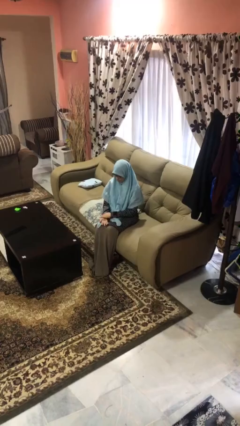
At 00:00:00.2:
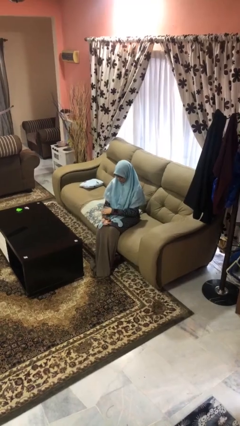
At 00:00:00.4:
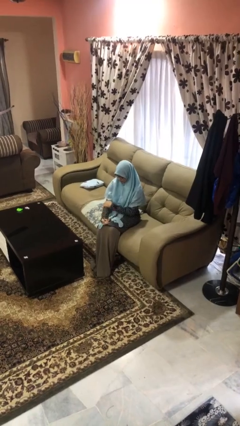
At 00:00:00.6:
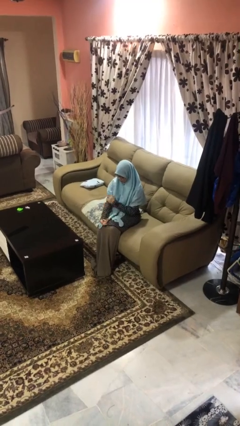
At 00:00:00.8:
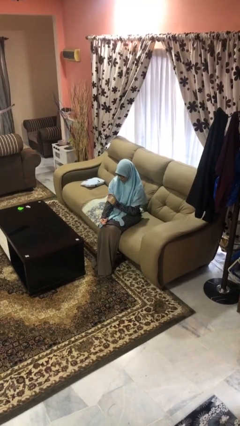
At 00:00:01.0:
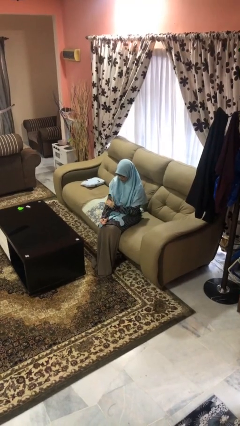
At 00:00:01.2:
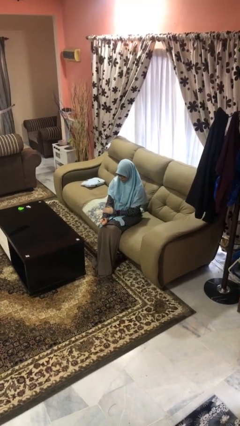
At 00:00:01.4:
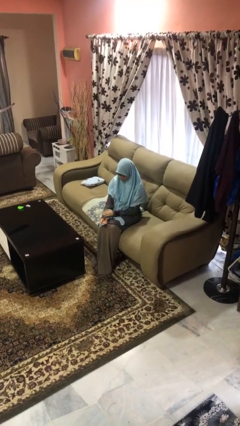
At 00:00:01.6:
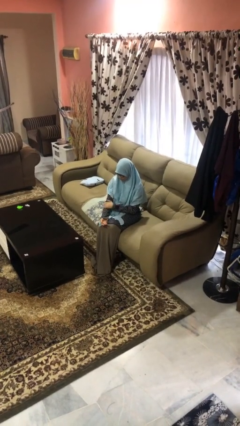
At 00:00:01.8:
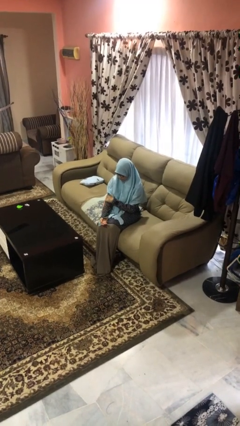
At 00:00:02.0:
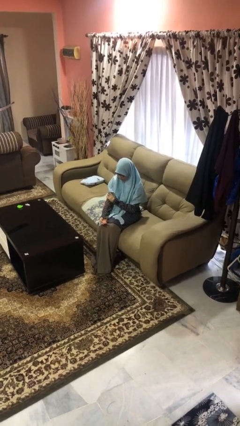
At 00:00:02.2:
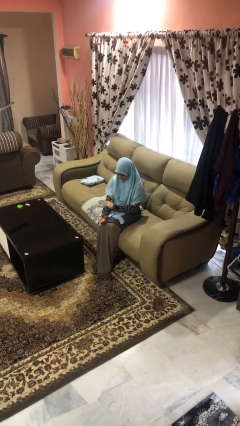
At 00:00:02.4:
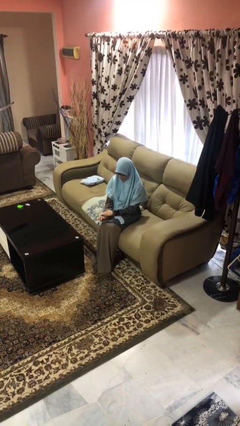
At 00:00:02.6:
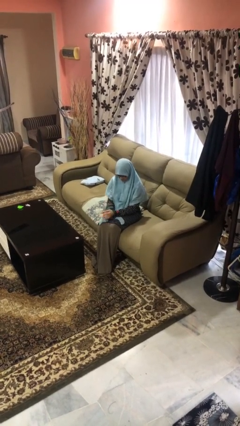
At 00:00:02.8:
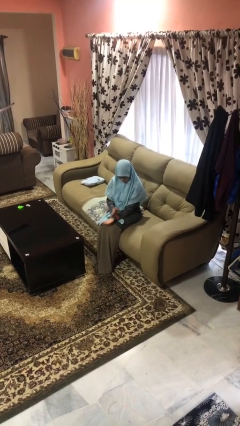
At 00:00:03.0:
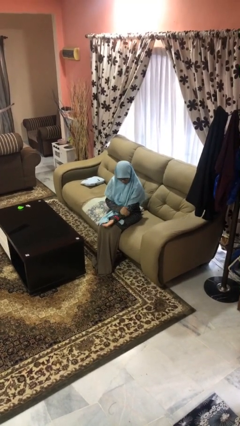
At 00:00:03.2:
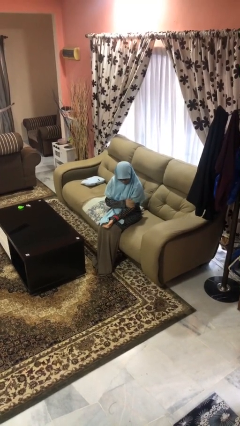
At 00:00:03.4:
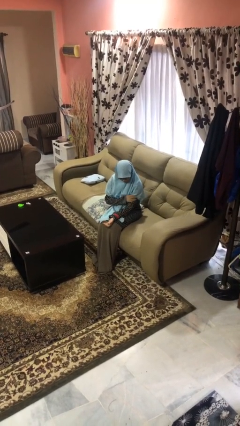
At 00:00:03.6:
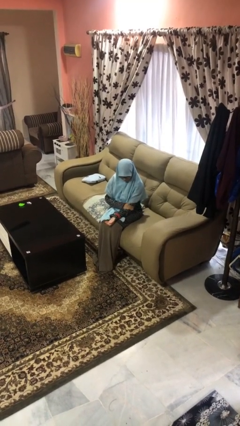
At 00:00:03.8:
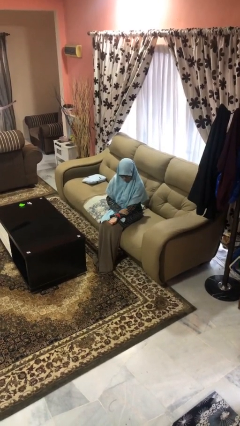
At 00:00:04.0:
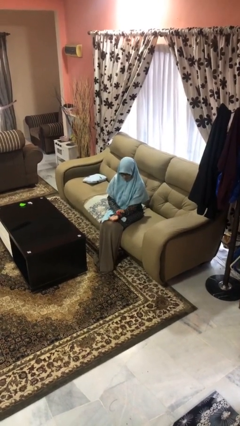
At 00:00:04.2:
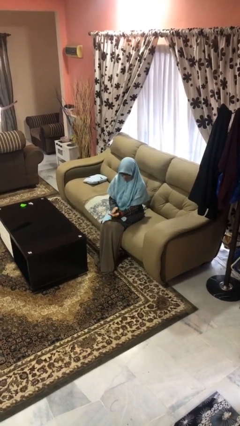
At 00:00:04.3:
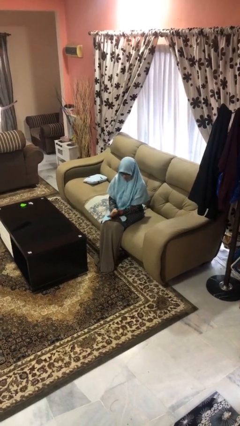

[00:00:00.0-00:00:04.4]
person looks at hands in lap

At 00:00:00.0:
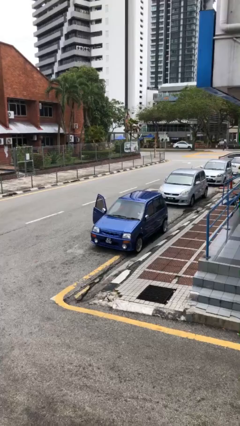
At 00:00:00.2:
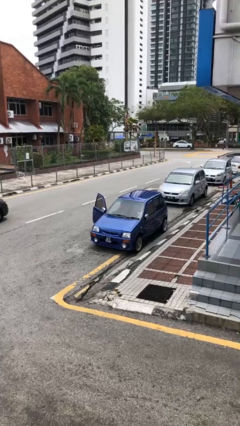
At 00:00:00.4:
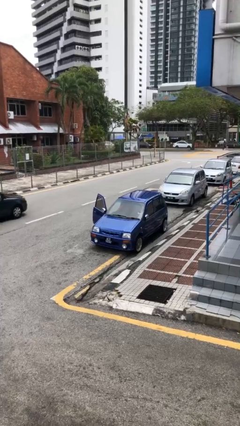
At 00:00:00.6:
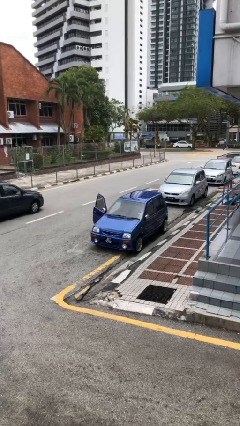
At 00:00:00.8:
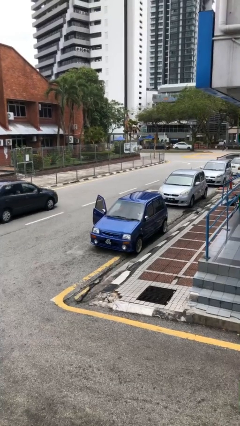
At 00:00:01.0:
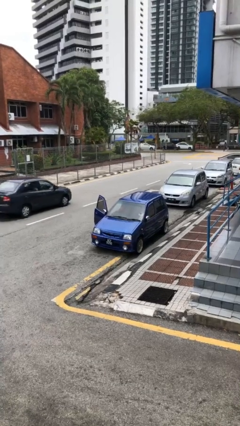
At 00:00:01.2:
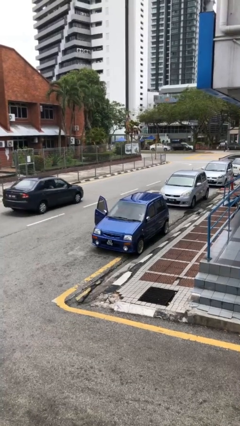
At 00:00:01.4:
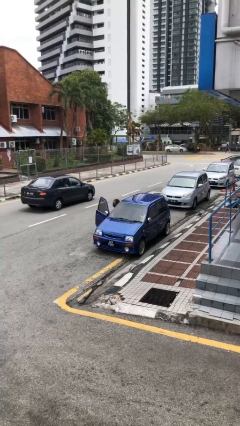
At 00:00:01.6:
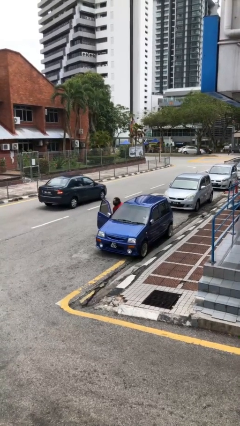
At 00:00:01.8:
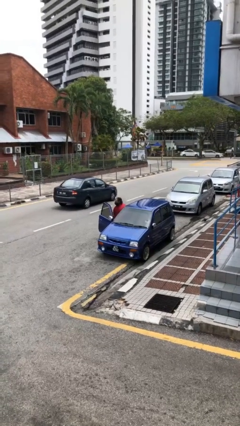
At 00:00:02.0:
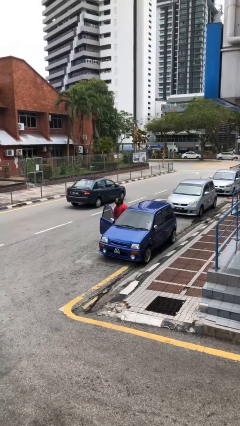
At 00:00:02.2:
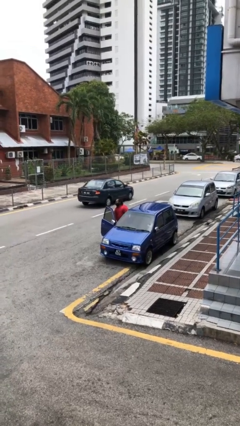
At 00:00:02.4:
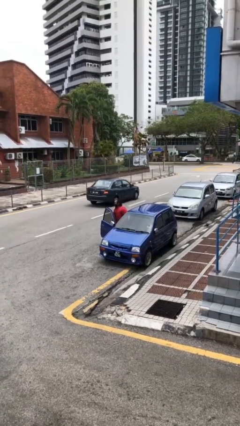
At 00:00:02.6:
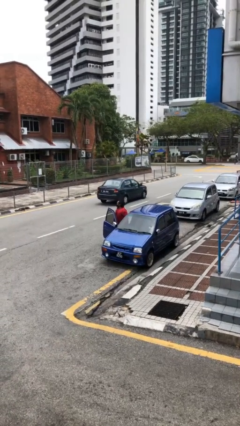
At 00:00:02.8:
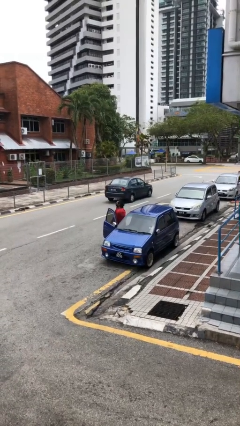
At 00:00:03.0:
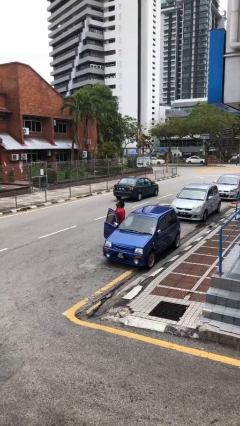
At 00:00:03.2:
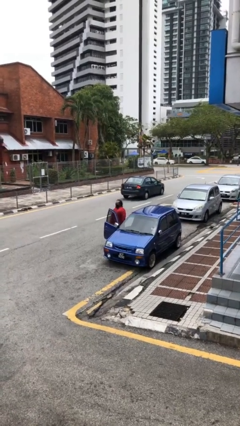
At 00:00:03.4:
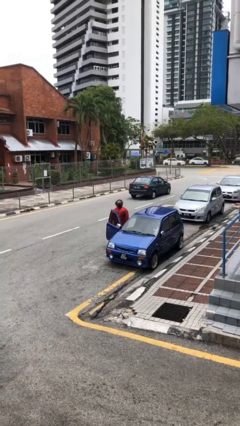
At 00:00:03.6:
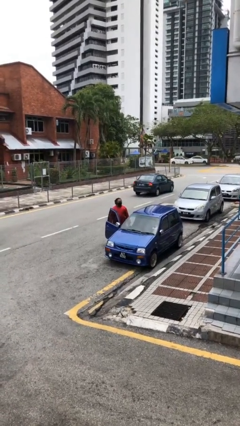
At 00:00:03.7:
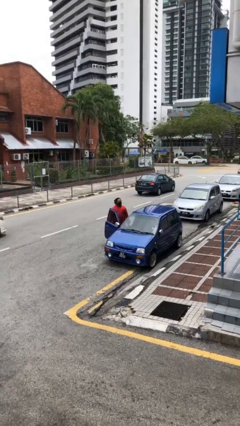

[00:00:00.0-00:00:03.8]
person exits car

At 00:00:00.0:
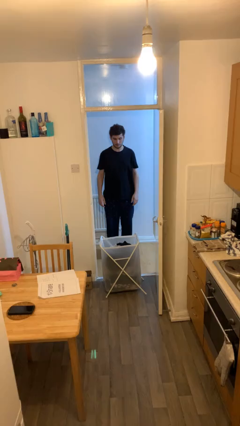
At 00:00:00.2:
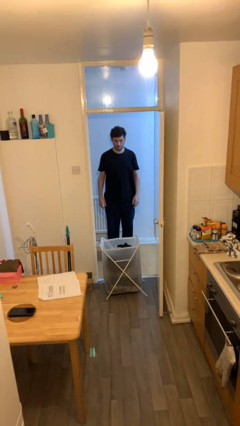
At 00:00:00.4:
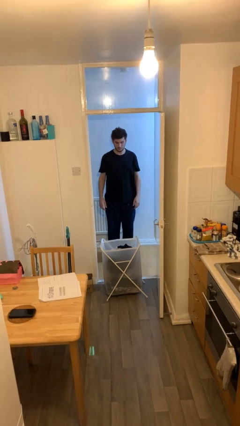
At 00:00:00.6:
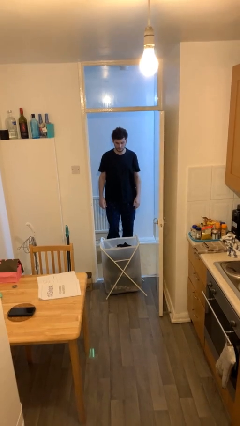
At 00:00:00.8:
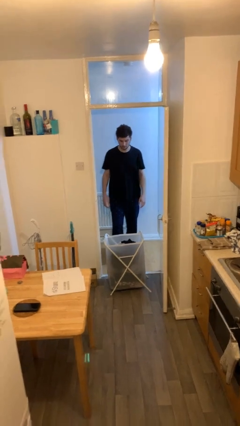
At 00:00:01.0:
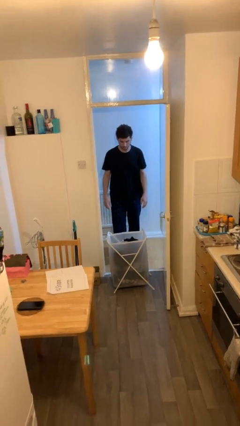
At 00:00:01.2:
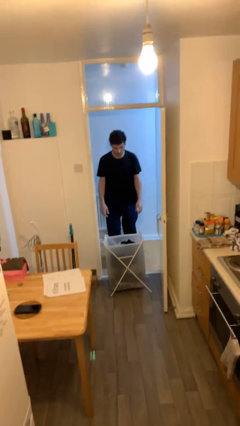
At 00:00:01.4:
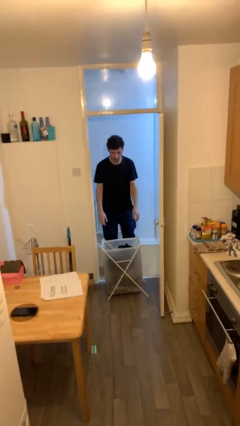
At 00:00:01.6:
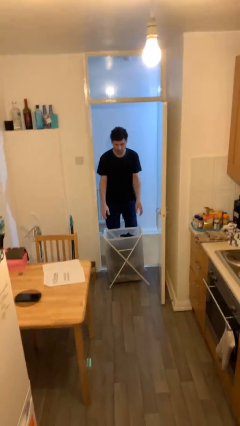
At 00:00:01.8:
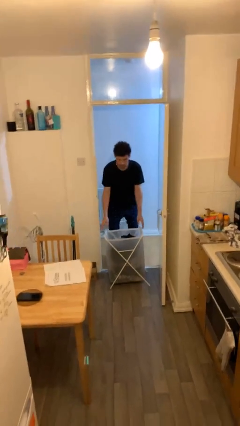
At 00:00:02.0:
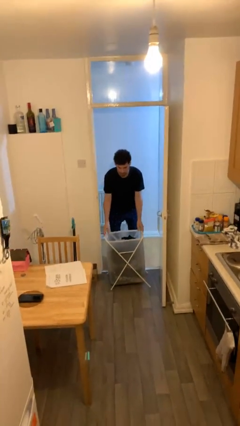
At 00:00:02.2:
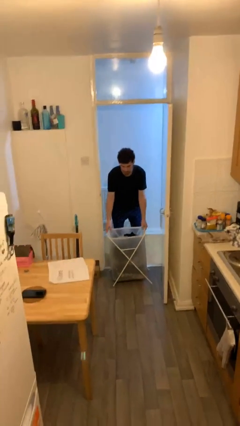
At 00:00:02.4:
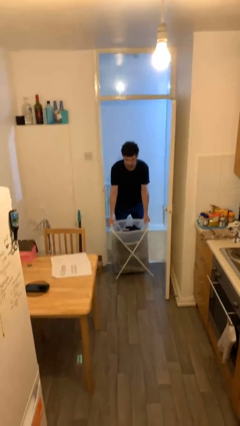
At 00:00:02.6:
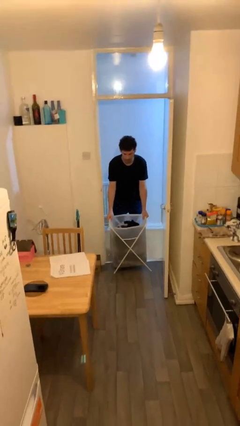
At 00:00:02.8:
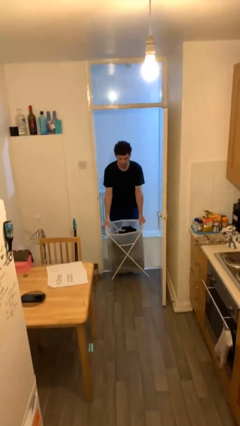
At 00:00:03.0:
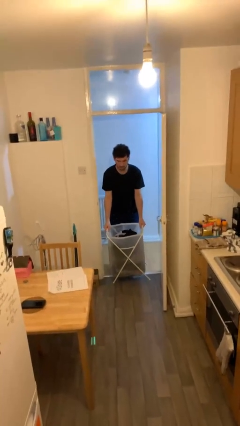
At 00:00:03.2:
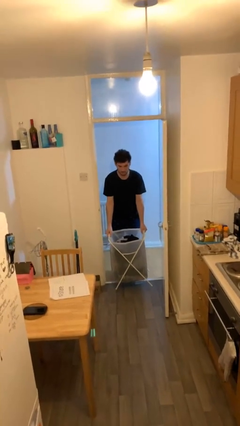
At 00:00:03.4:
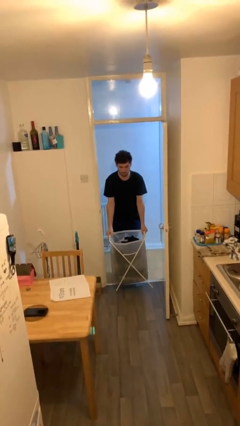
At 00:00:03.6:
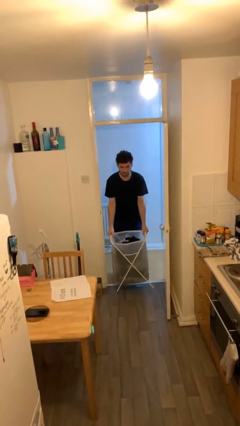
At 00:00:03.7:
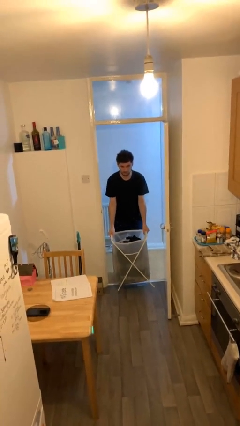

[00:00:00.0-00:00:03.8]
person picks up object from floor

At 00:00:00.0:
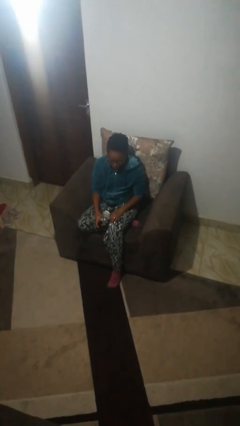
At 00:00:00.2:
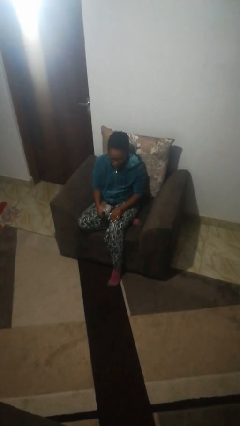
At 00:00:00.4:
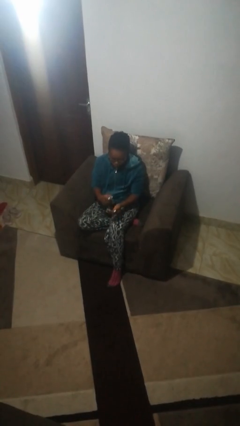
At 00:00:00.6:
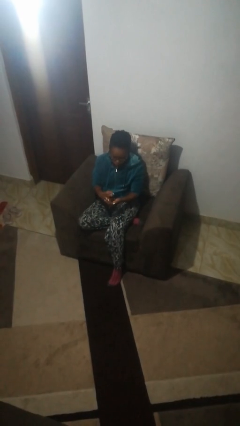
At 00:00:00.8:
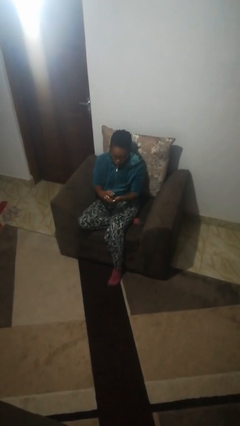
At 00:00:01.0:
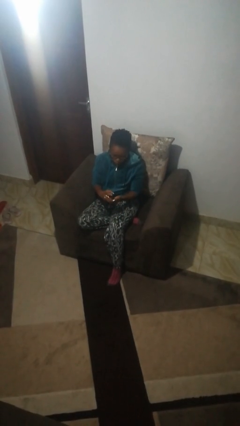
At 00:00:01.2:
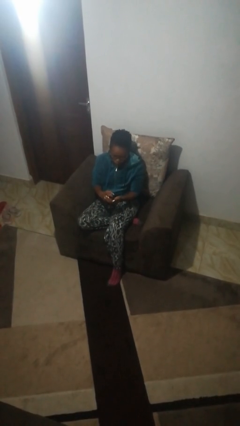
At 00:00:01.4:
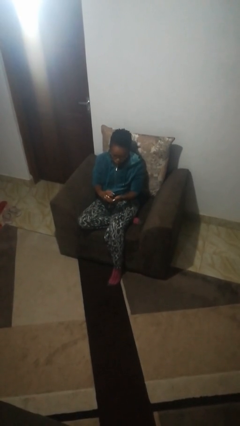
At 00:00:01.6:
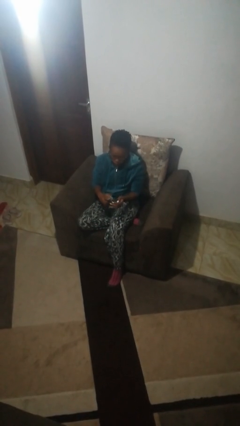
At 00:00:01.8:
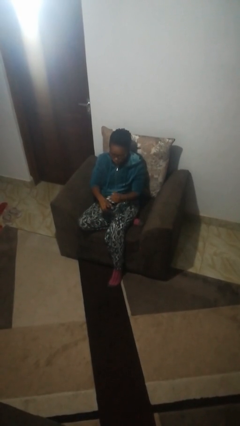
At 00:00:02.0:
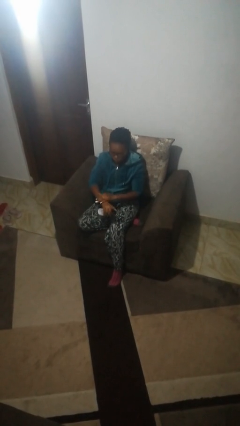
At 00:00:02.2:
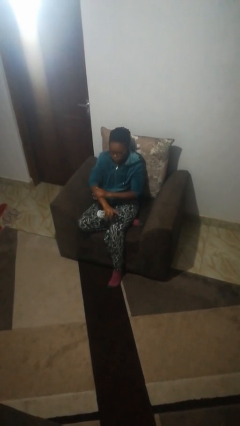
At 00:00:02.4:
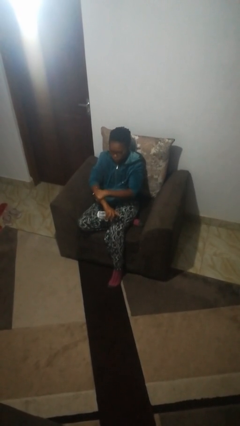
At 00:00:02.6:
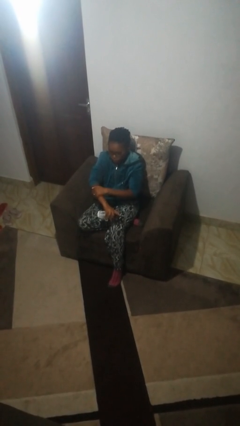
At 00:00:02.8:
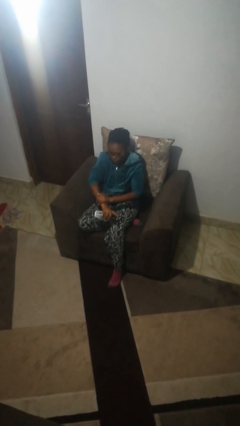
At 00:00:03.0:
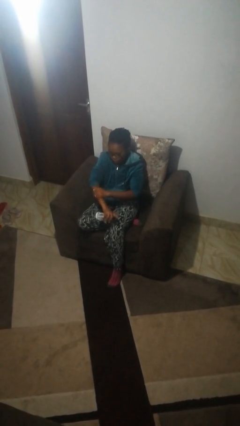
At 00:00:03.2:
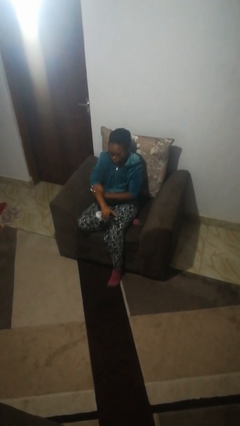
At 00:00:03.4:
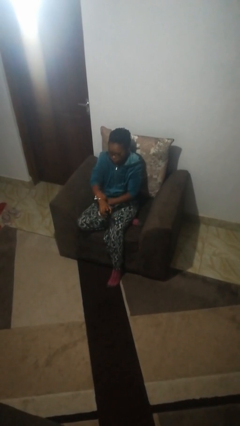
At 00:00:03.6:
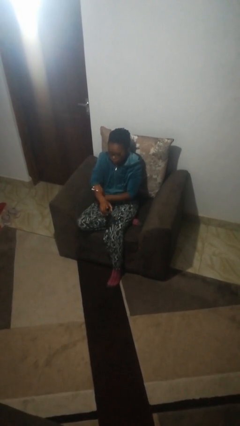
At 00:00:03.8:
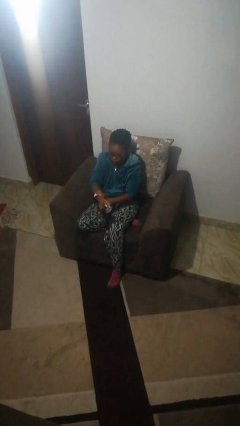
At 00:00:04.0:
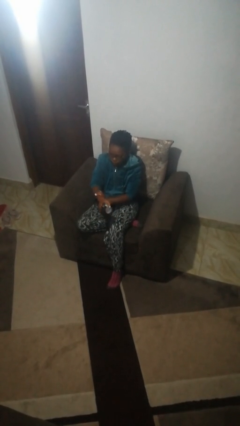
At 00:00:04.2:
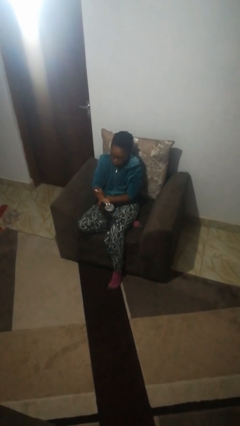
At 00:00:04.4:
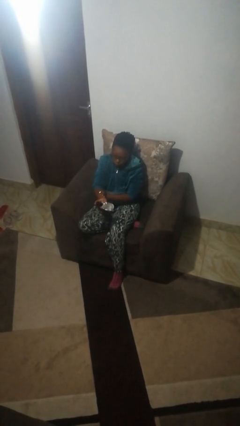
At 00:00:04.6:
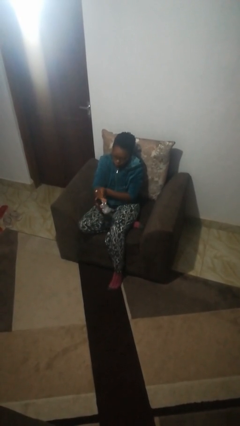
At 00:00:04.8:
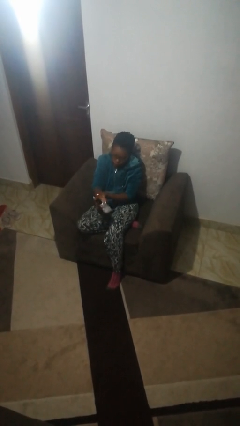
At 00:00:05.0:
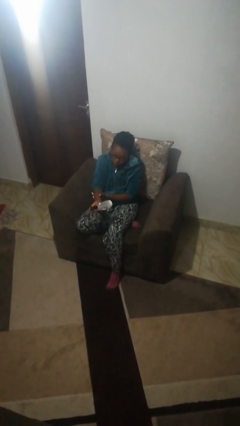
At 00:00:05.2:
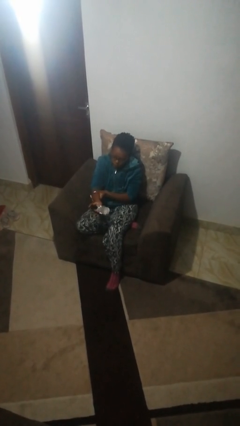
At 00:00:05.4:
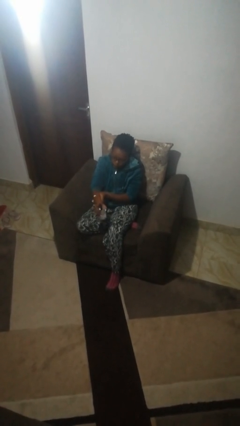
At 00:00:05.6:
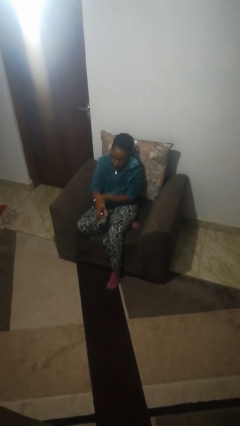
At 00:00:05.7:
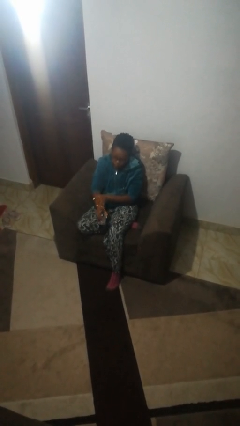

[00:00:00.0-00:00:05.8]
person applies sunscreen
